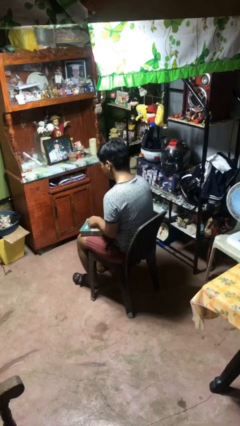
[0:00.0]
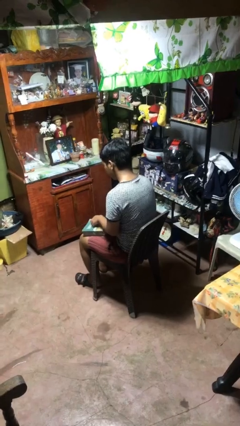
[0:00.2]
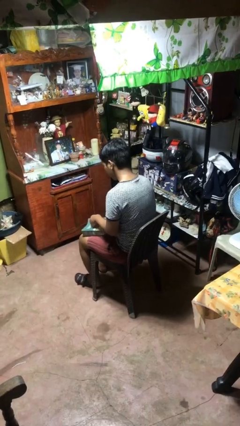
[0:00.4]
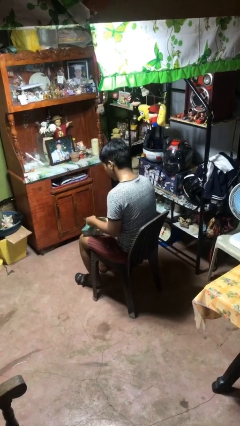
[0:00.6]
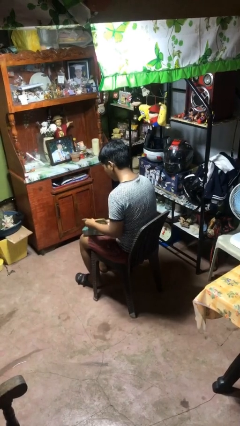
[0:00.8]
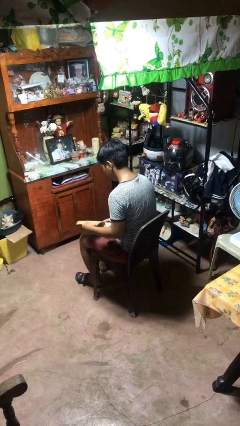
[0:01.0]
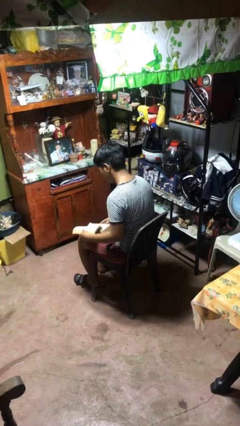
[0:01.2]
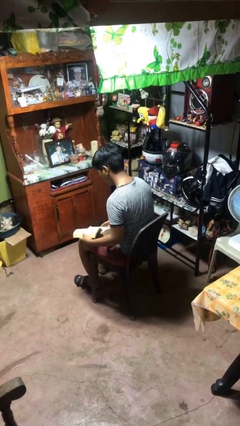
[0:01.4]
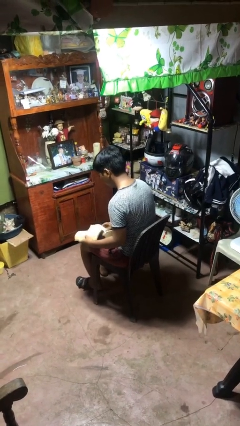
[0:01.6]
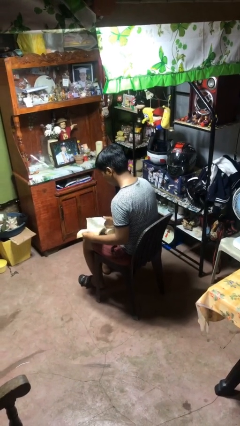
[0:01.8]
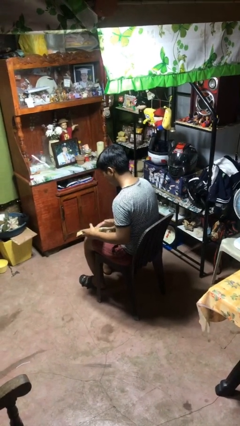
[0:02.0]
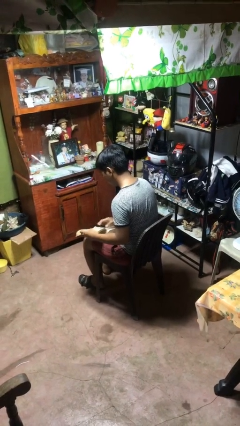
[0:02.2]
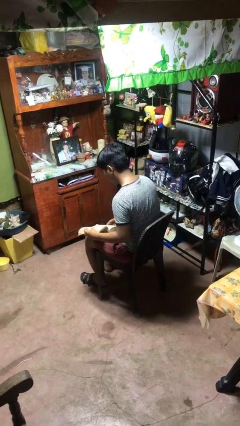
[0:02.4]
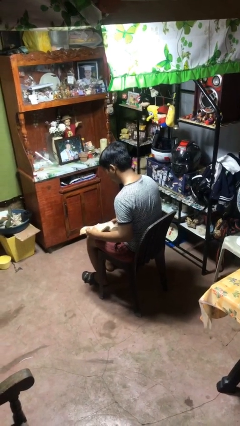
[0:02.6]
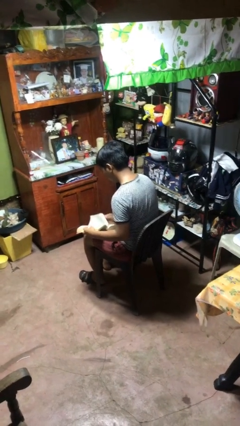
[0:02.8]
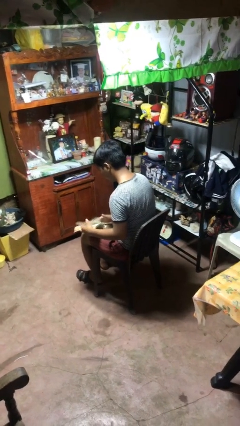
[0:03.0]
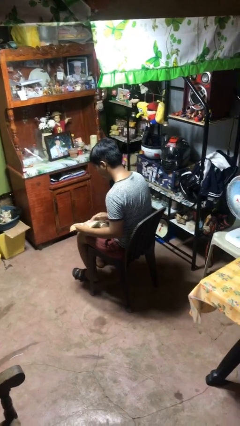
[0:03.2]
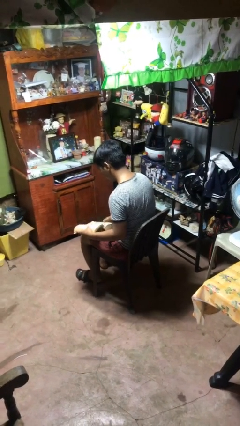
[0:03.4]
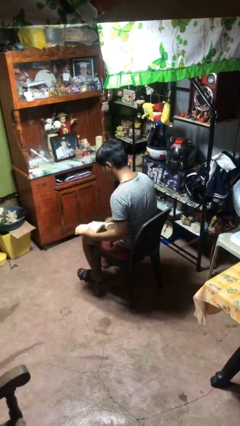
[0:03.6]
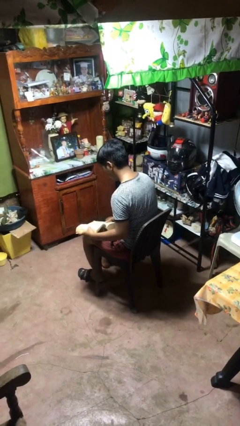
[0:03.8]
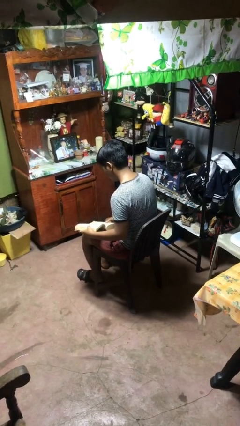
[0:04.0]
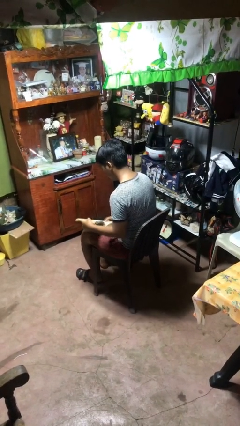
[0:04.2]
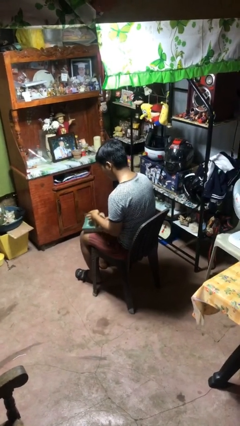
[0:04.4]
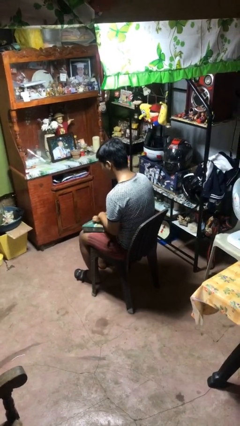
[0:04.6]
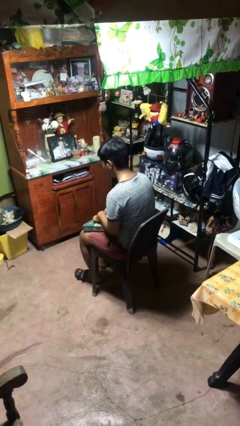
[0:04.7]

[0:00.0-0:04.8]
person reads book

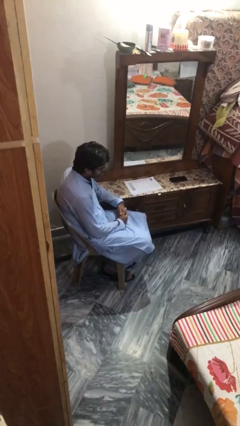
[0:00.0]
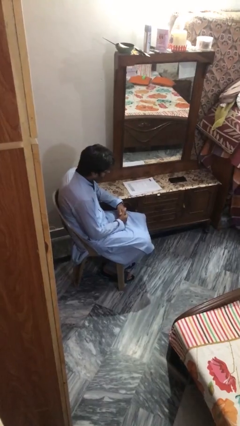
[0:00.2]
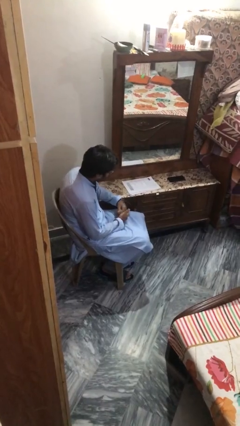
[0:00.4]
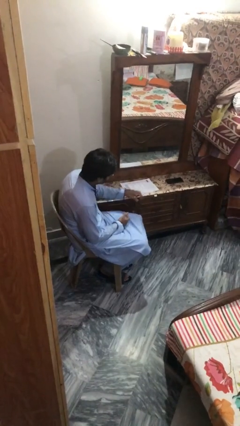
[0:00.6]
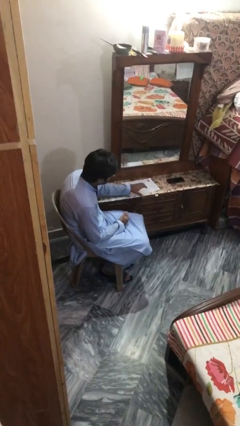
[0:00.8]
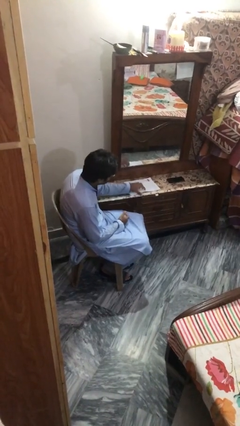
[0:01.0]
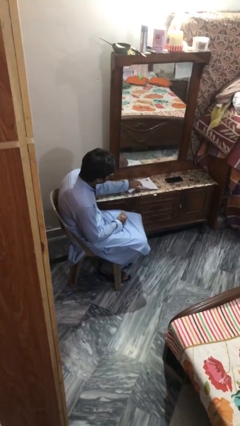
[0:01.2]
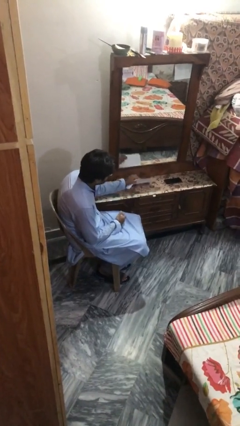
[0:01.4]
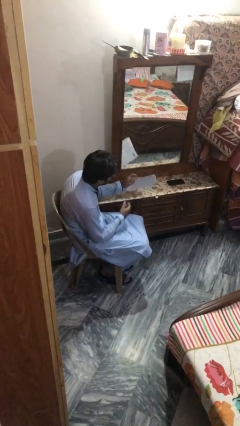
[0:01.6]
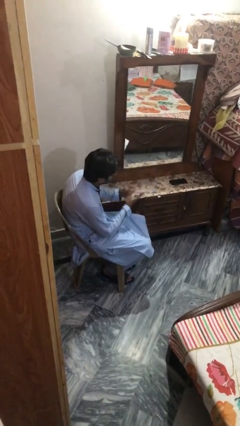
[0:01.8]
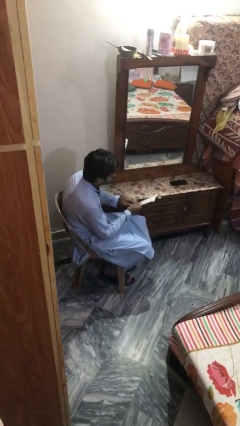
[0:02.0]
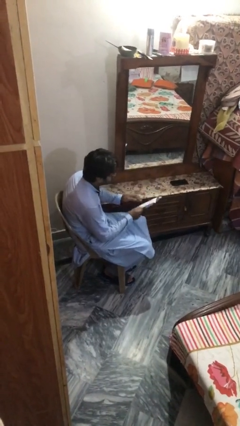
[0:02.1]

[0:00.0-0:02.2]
person picks up object from table

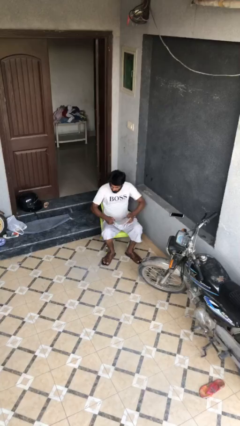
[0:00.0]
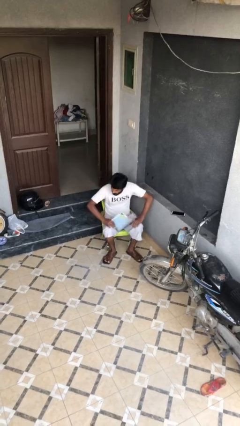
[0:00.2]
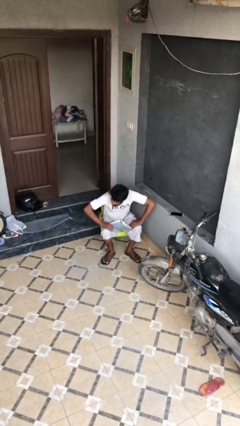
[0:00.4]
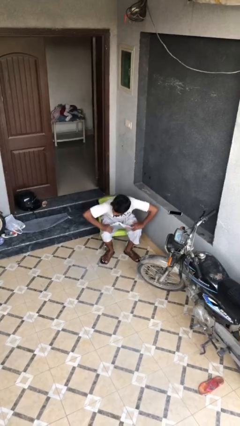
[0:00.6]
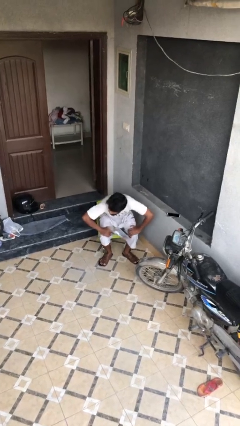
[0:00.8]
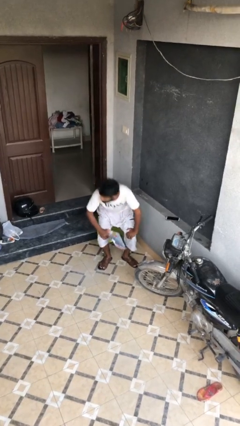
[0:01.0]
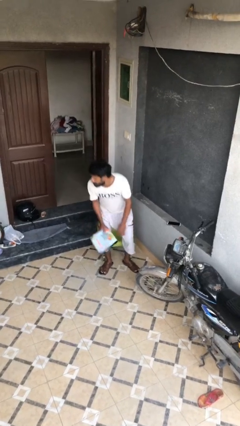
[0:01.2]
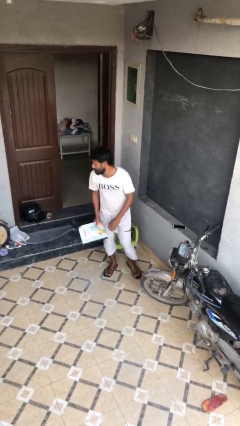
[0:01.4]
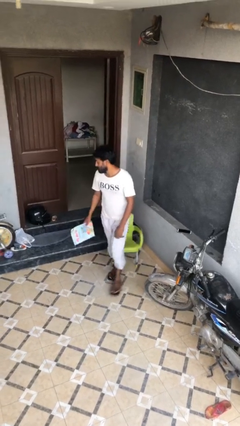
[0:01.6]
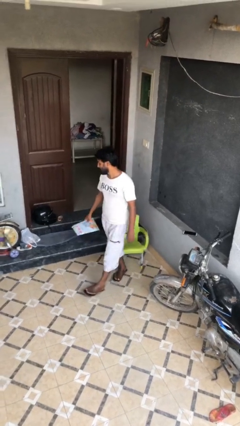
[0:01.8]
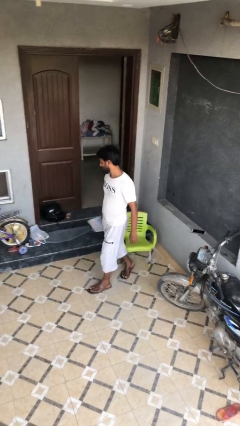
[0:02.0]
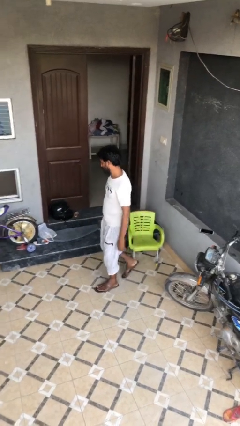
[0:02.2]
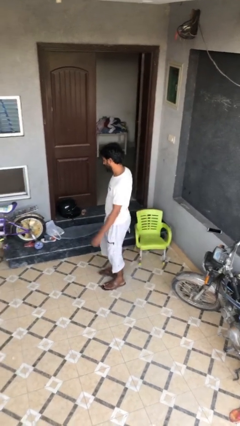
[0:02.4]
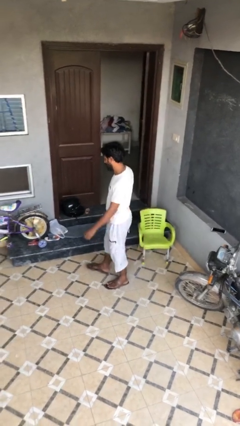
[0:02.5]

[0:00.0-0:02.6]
person stands up

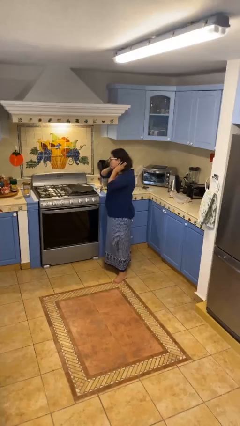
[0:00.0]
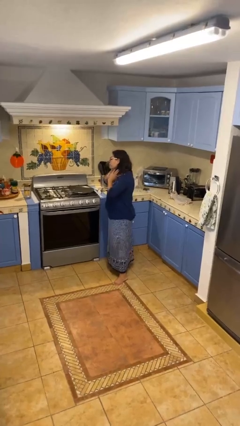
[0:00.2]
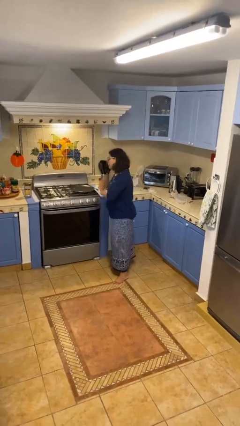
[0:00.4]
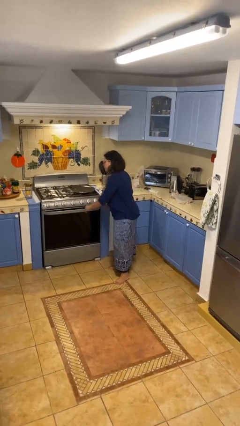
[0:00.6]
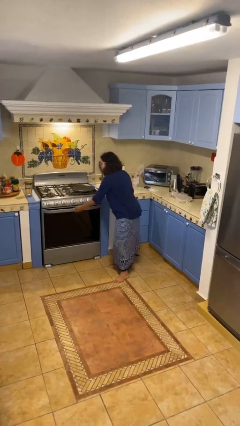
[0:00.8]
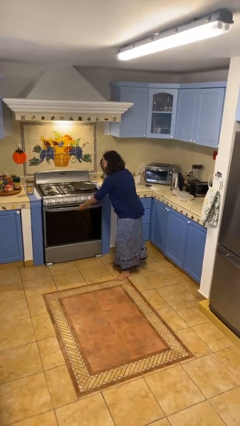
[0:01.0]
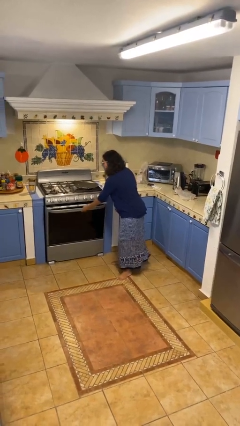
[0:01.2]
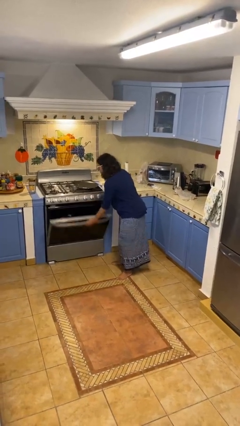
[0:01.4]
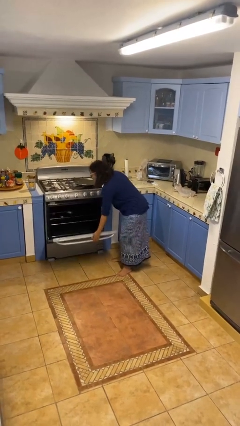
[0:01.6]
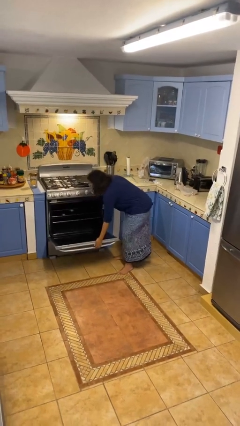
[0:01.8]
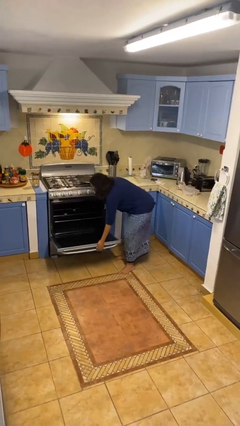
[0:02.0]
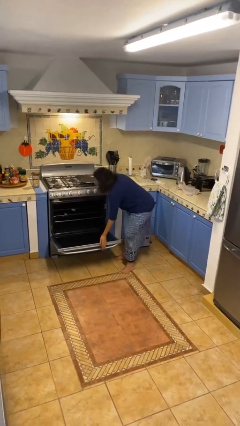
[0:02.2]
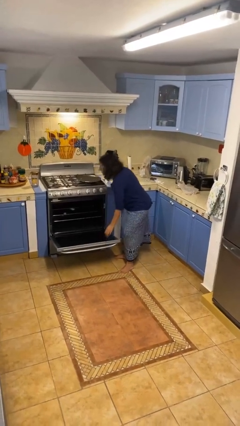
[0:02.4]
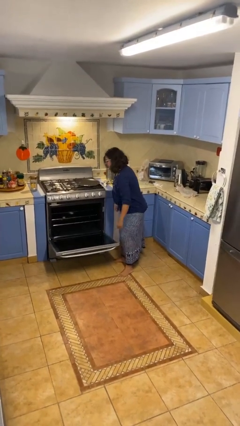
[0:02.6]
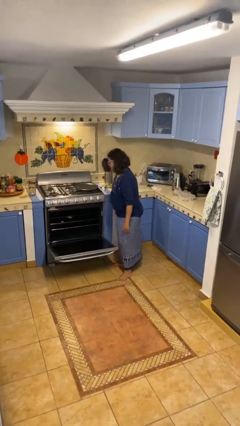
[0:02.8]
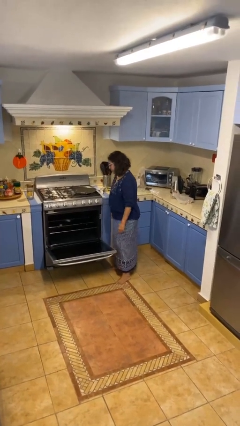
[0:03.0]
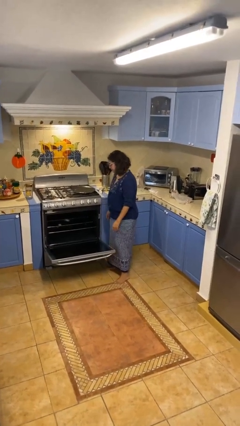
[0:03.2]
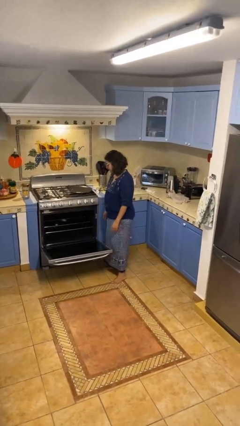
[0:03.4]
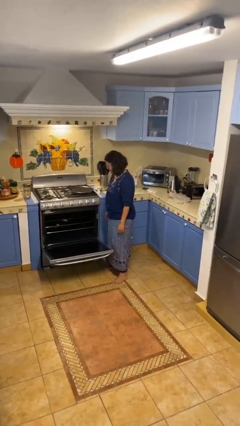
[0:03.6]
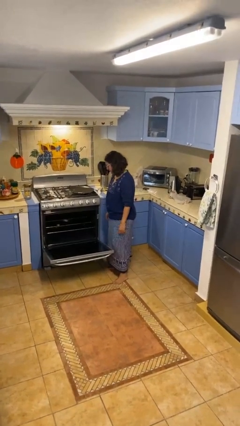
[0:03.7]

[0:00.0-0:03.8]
person opens oven door

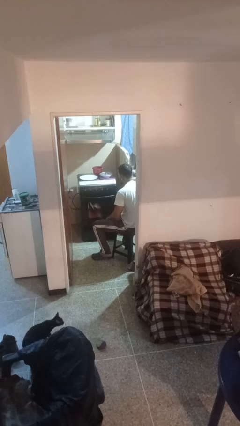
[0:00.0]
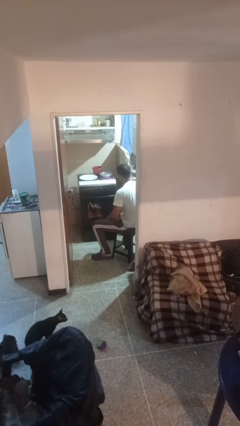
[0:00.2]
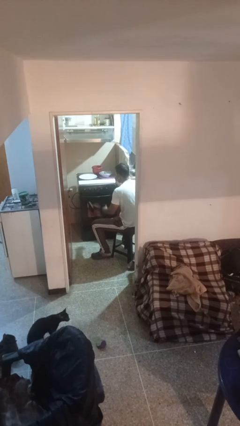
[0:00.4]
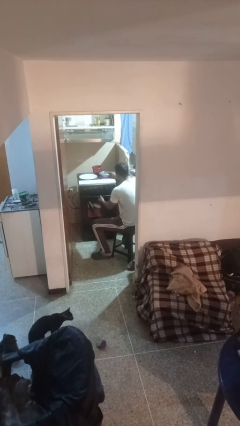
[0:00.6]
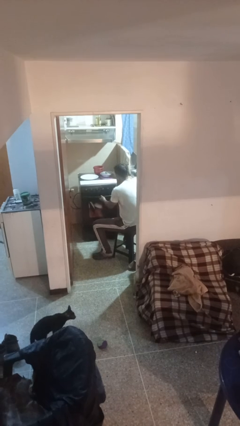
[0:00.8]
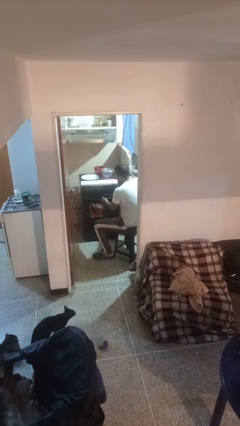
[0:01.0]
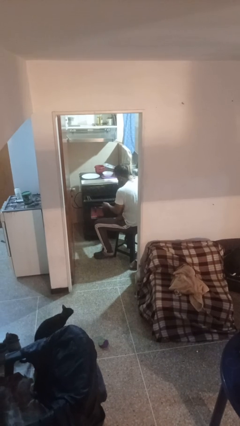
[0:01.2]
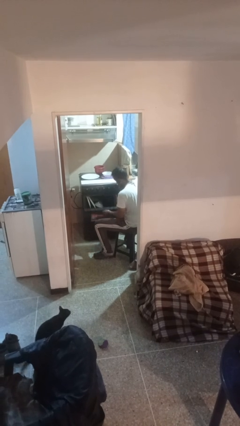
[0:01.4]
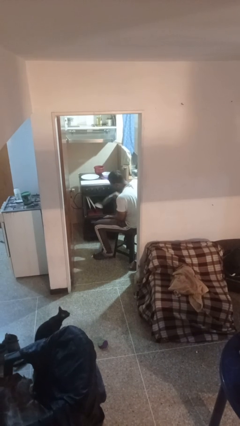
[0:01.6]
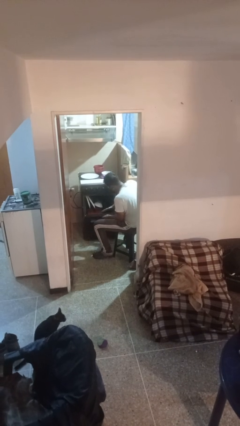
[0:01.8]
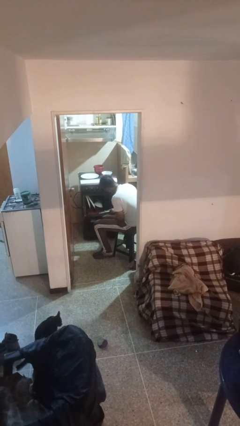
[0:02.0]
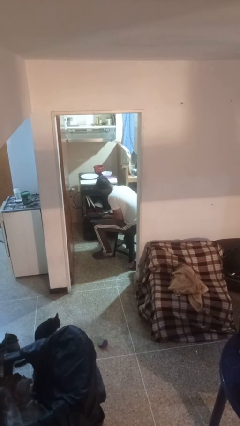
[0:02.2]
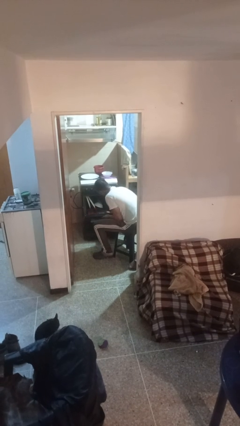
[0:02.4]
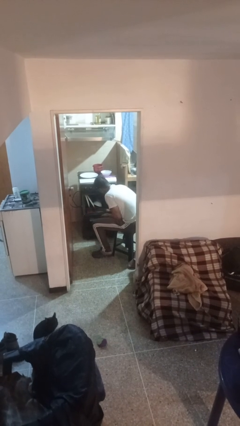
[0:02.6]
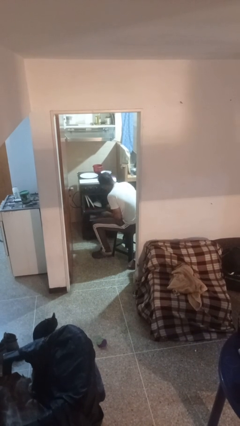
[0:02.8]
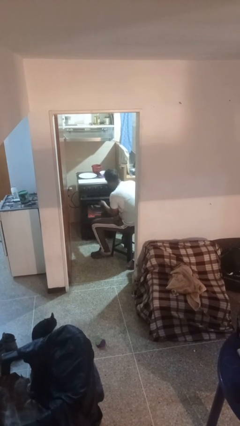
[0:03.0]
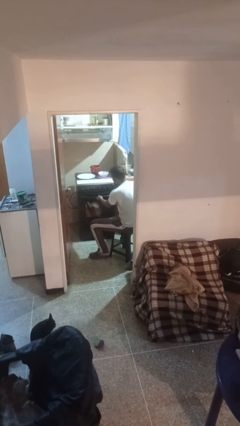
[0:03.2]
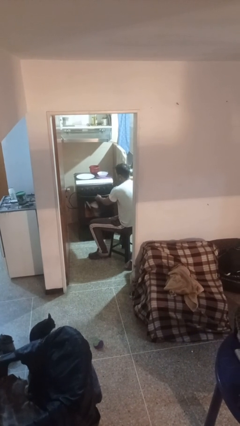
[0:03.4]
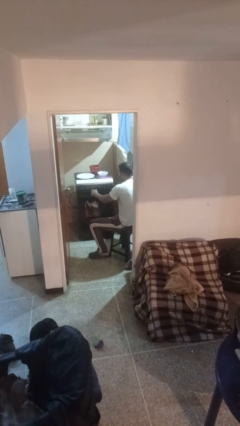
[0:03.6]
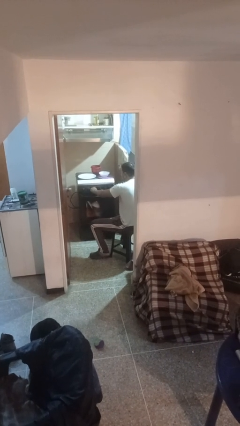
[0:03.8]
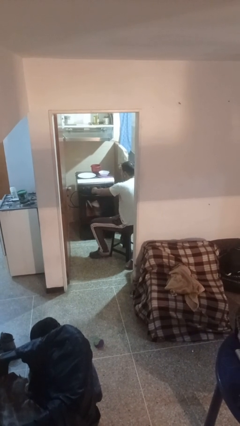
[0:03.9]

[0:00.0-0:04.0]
person loads dishwasher
